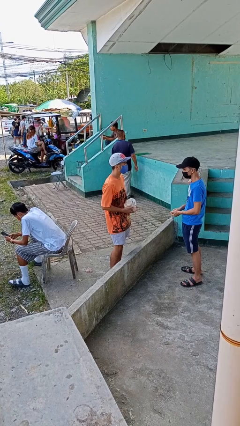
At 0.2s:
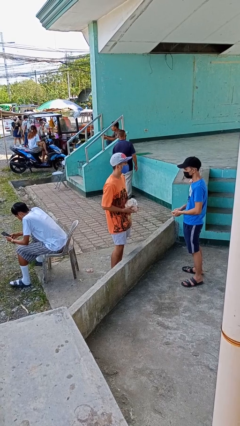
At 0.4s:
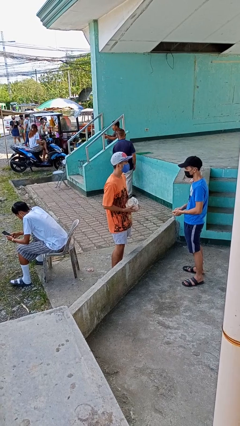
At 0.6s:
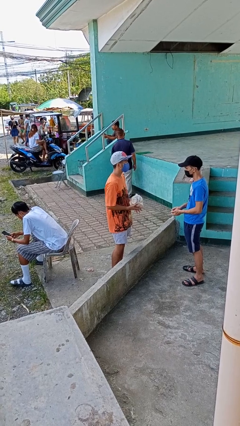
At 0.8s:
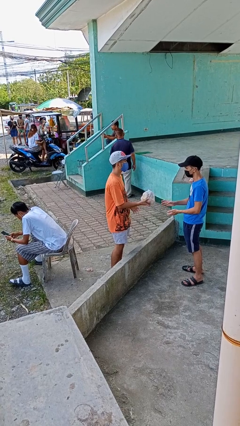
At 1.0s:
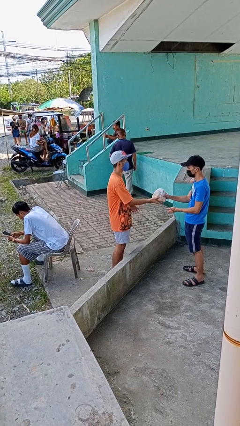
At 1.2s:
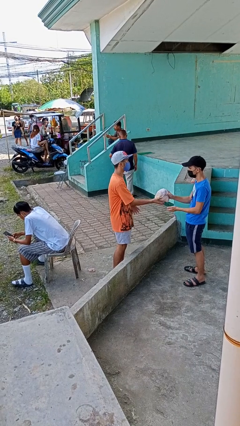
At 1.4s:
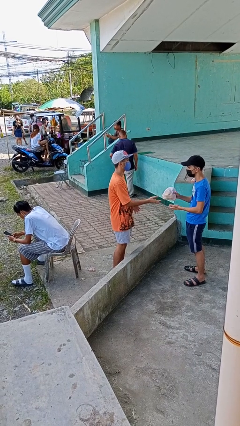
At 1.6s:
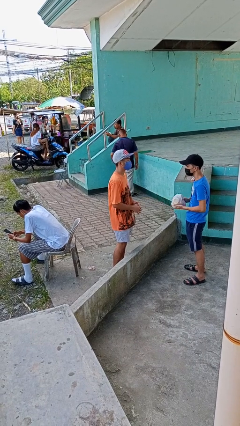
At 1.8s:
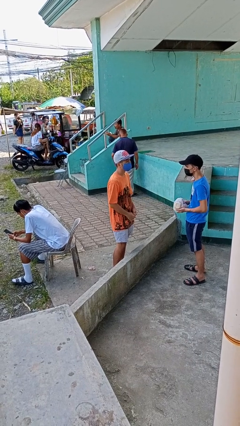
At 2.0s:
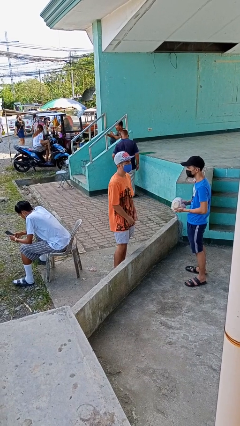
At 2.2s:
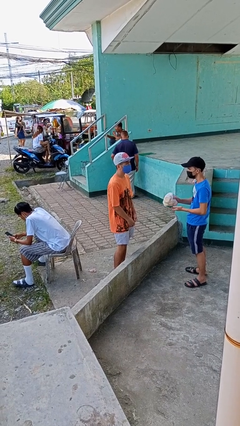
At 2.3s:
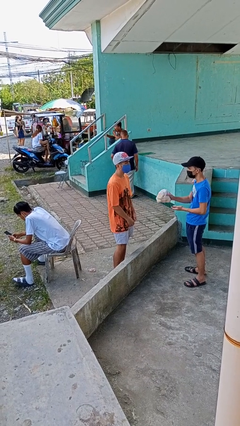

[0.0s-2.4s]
person transfers object to person

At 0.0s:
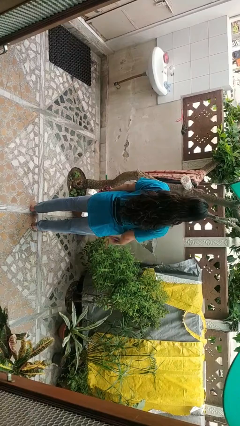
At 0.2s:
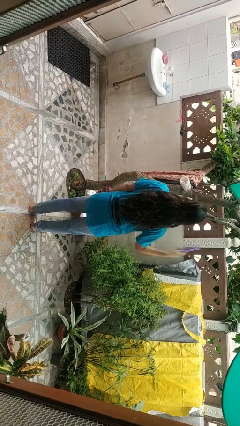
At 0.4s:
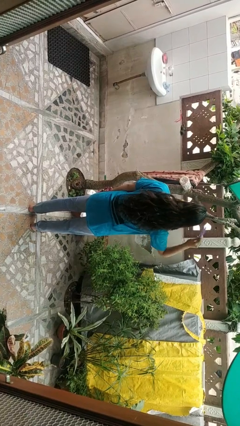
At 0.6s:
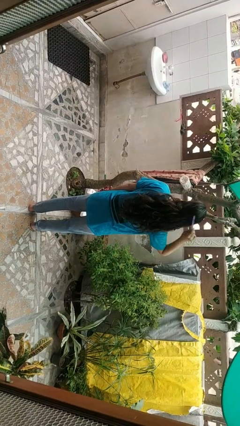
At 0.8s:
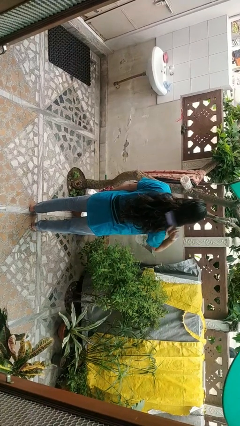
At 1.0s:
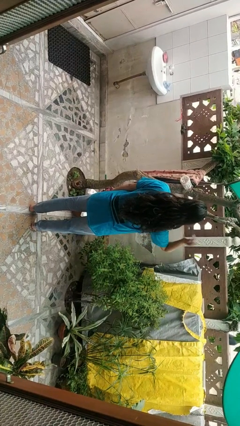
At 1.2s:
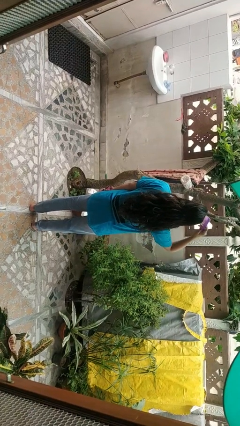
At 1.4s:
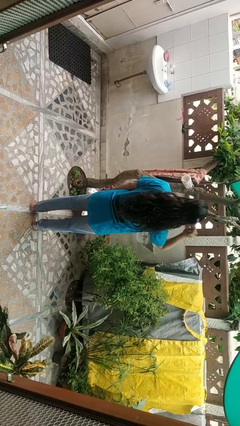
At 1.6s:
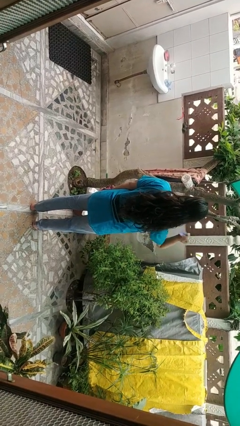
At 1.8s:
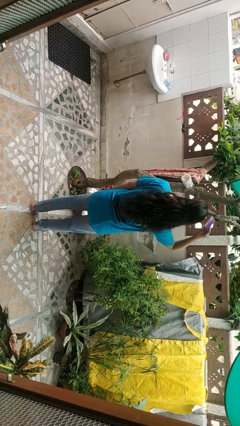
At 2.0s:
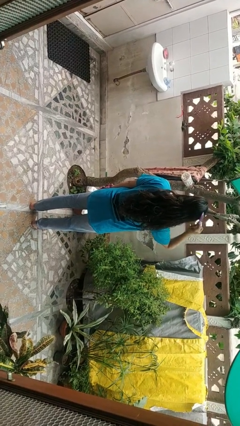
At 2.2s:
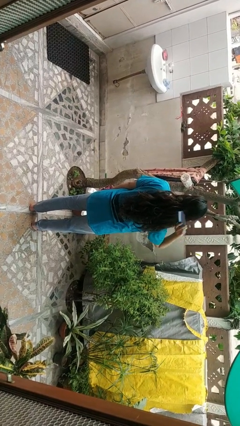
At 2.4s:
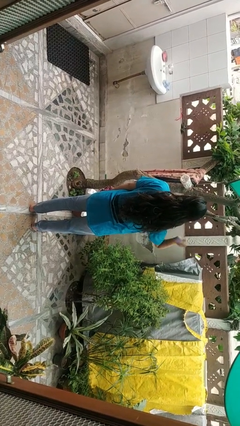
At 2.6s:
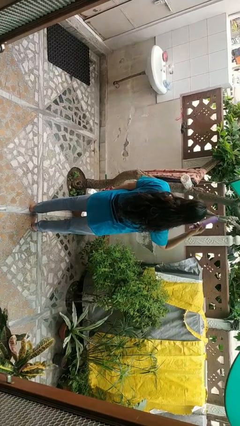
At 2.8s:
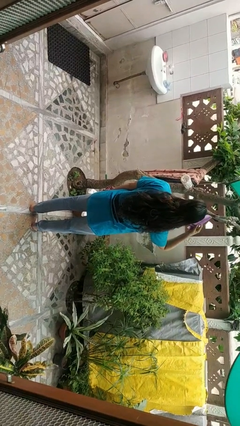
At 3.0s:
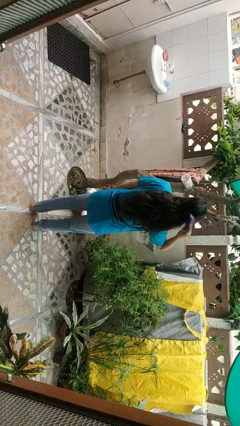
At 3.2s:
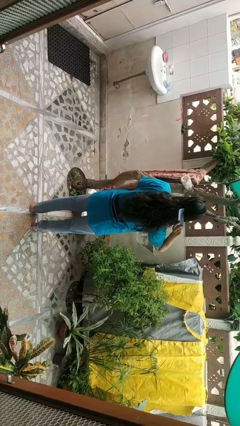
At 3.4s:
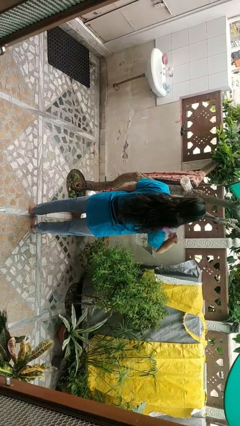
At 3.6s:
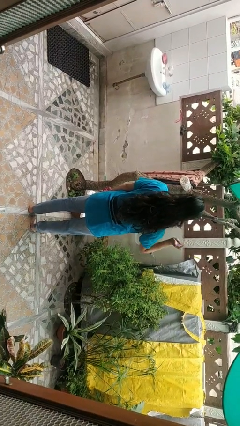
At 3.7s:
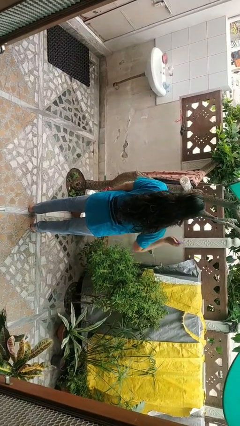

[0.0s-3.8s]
person brushes hair

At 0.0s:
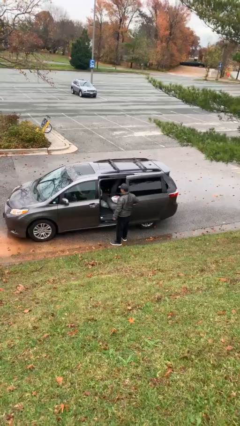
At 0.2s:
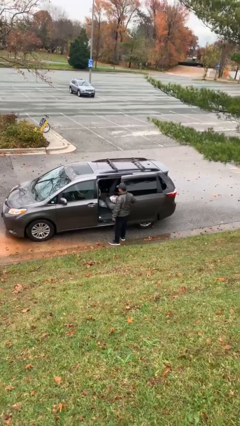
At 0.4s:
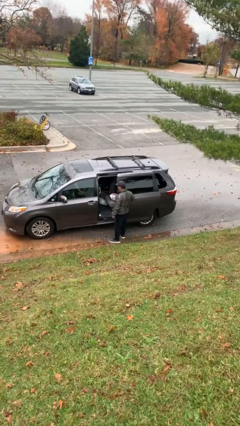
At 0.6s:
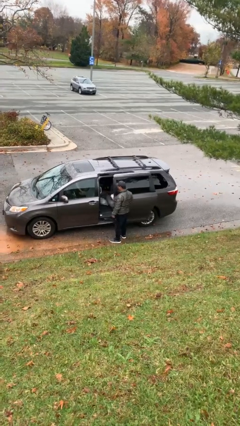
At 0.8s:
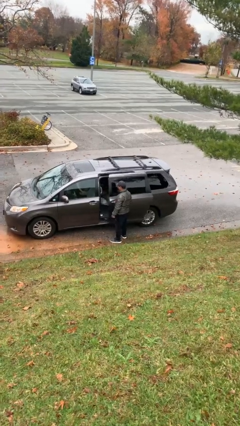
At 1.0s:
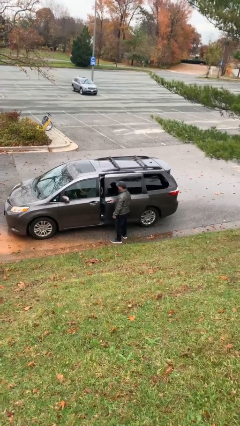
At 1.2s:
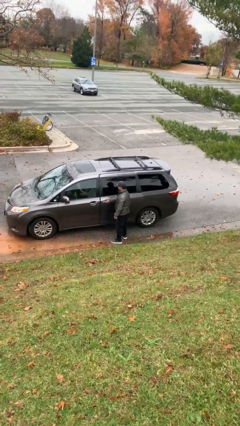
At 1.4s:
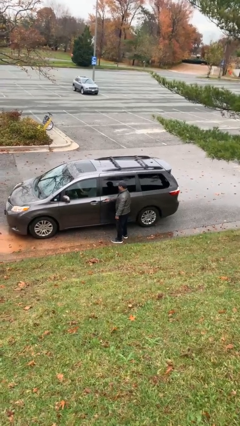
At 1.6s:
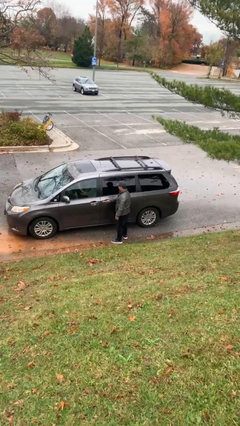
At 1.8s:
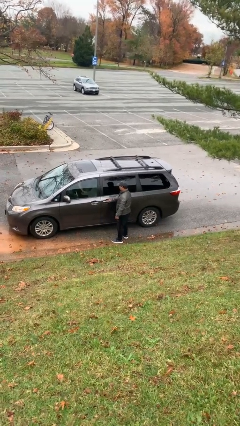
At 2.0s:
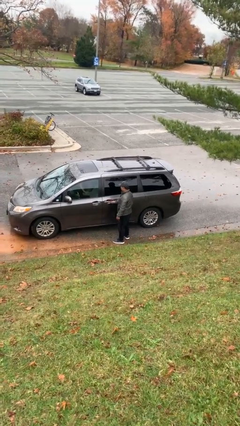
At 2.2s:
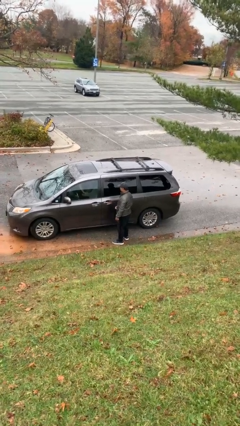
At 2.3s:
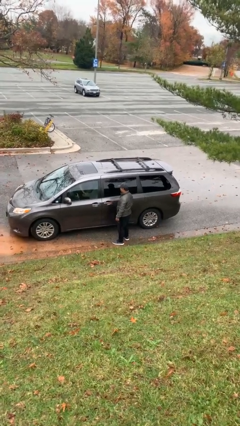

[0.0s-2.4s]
person closes car door

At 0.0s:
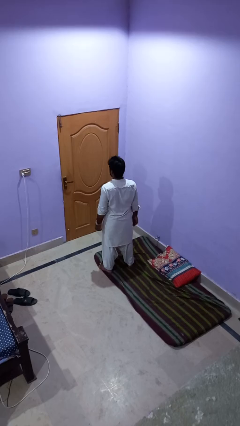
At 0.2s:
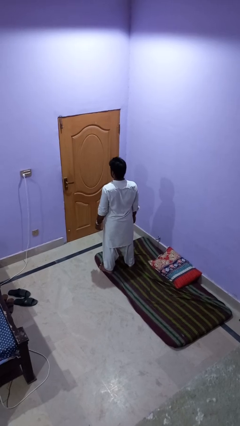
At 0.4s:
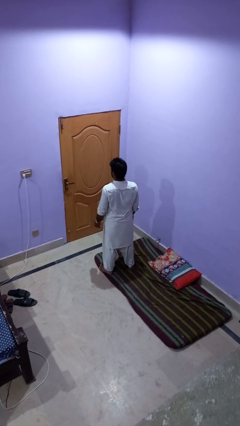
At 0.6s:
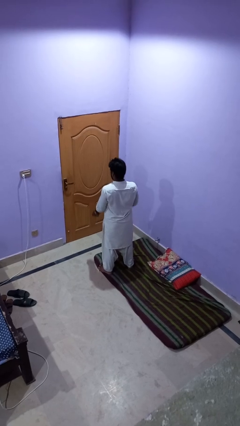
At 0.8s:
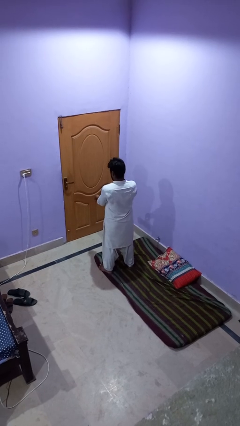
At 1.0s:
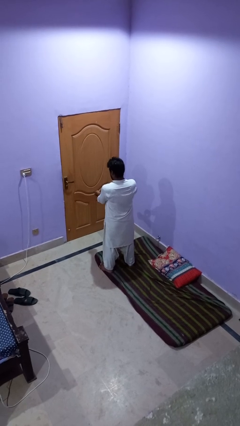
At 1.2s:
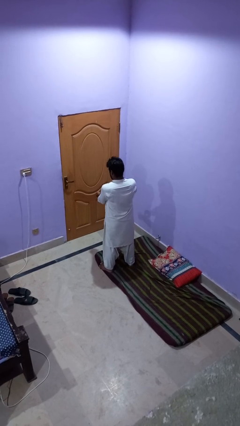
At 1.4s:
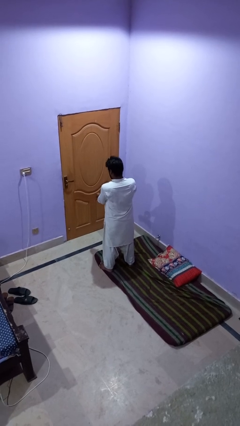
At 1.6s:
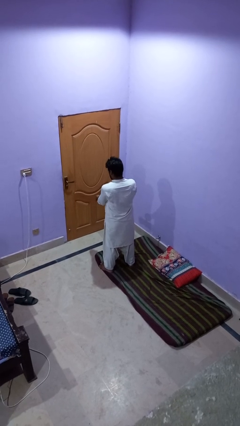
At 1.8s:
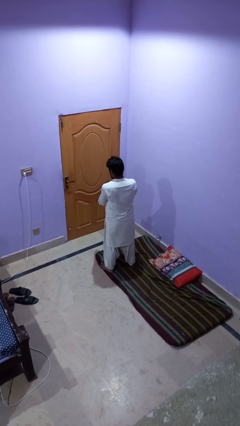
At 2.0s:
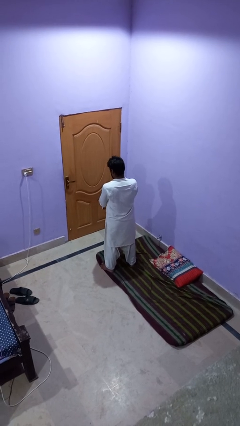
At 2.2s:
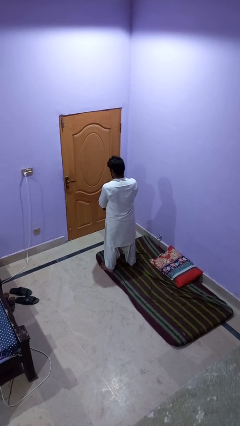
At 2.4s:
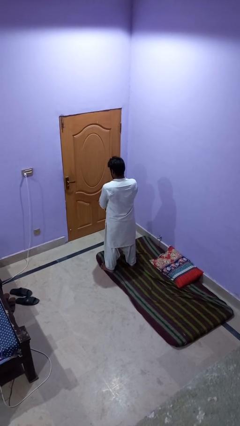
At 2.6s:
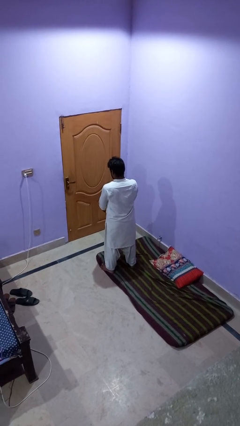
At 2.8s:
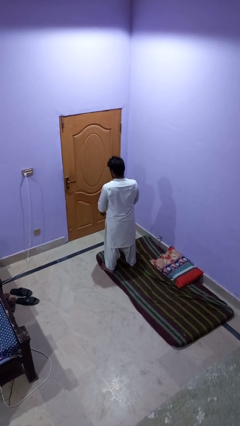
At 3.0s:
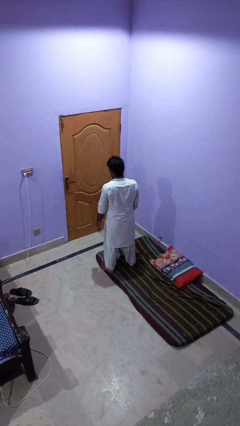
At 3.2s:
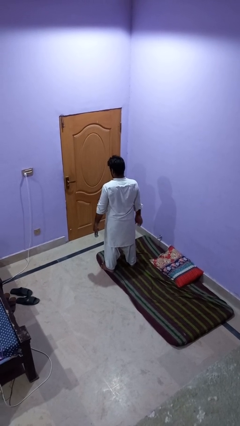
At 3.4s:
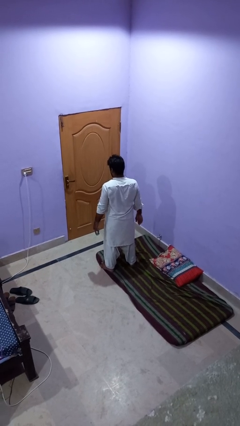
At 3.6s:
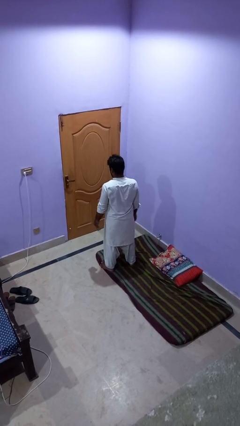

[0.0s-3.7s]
person takes off wristwatch

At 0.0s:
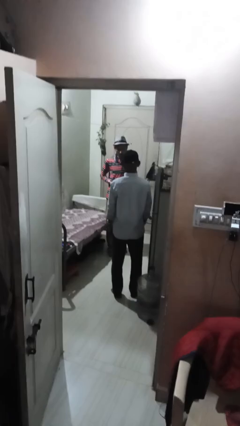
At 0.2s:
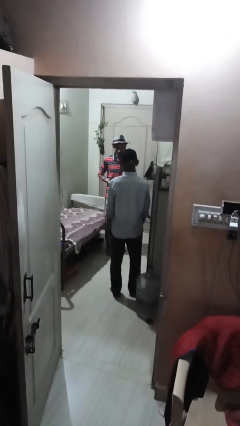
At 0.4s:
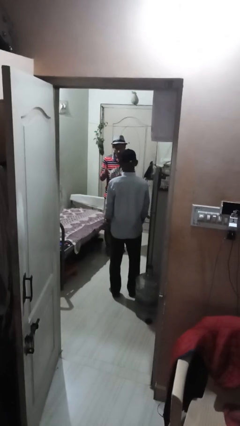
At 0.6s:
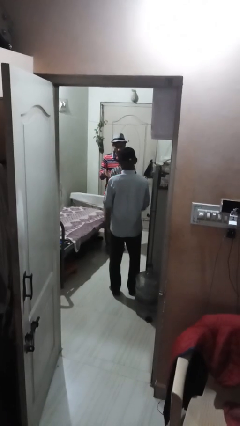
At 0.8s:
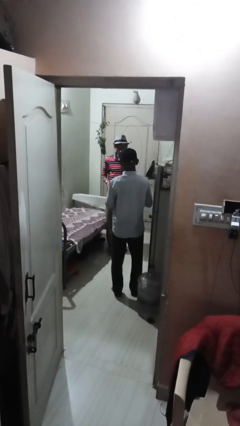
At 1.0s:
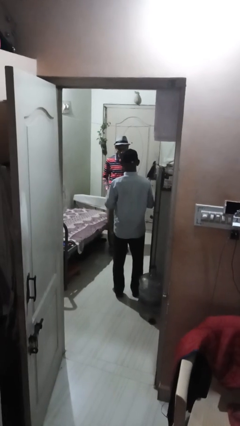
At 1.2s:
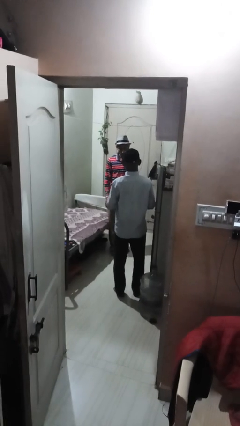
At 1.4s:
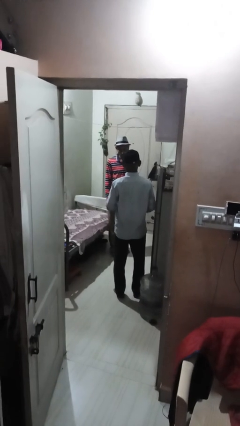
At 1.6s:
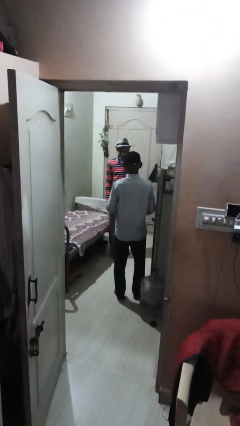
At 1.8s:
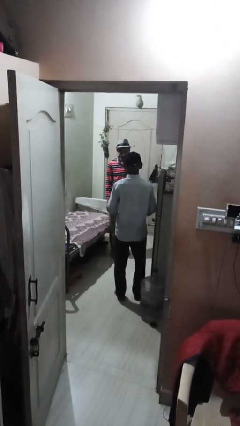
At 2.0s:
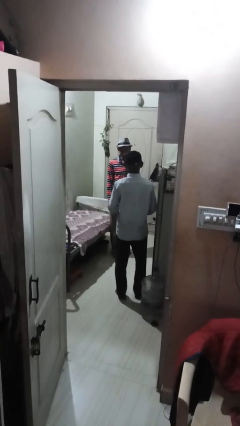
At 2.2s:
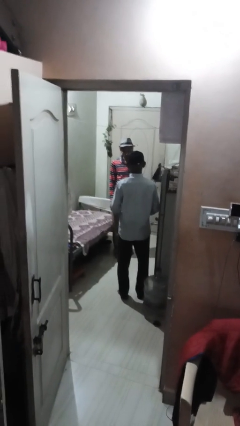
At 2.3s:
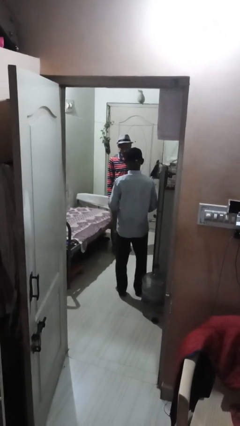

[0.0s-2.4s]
person catches object from person

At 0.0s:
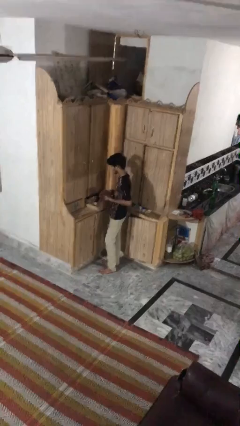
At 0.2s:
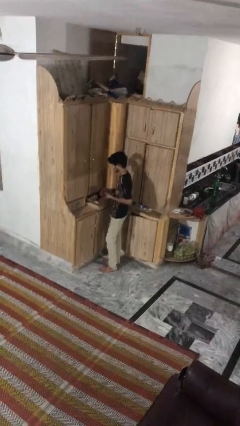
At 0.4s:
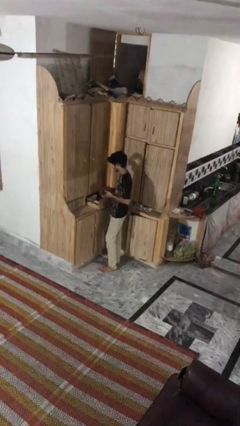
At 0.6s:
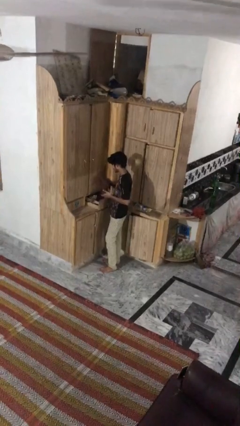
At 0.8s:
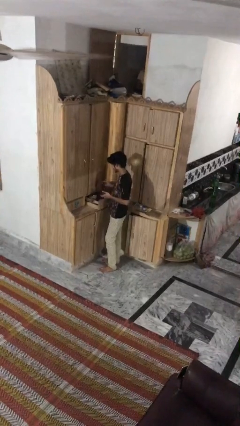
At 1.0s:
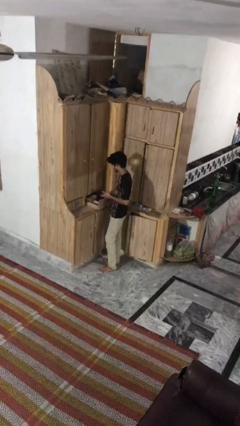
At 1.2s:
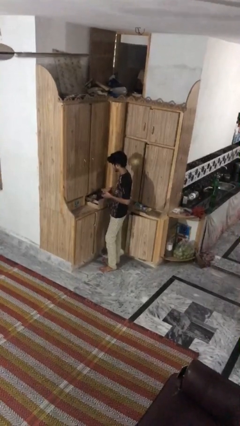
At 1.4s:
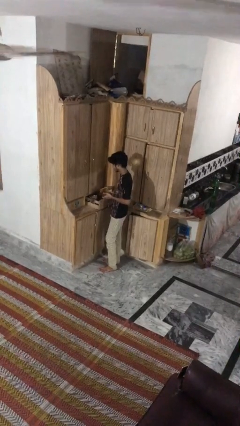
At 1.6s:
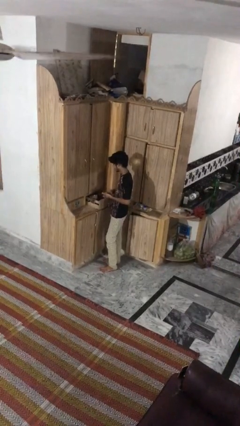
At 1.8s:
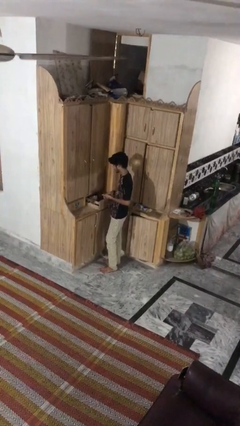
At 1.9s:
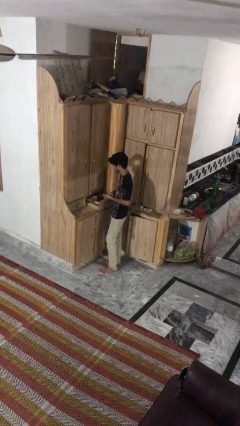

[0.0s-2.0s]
person puts clothes into dresser

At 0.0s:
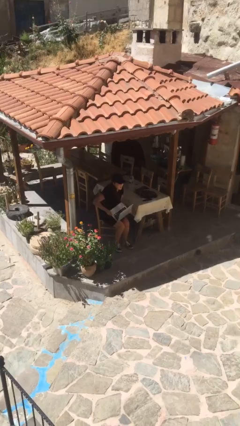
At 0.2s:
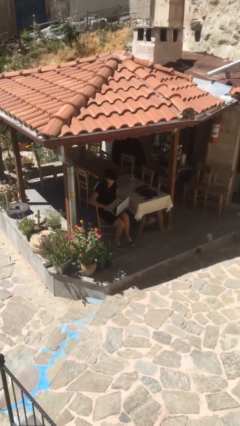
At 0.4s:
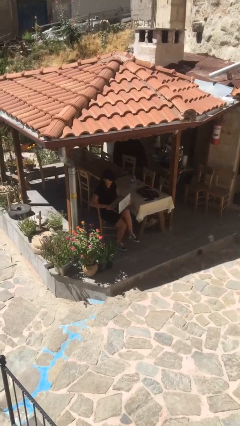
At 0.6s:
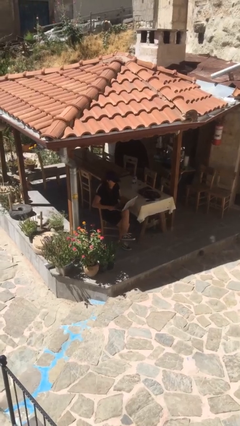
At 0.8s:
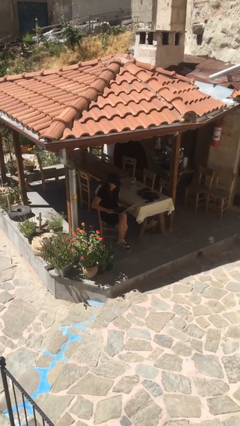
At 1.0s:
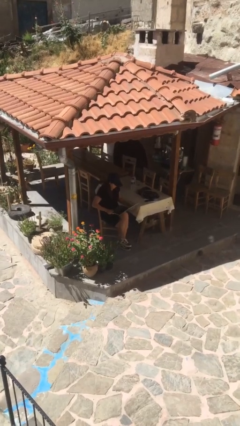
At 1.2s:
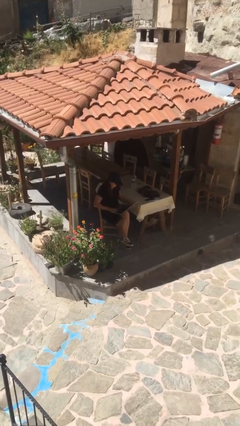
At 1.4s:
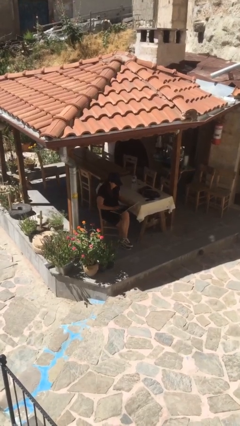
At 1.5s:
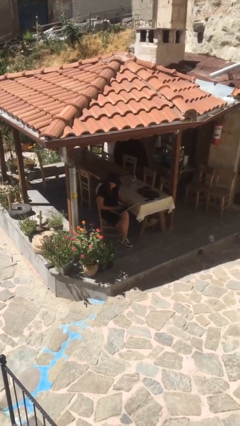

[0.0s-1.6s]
person sits down
